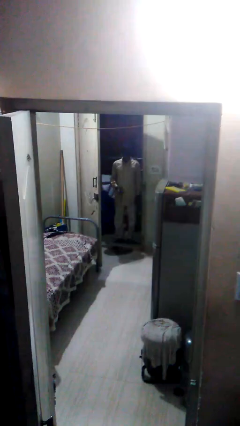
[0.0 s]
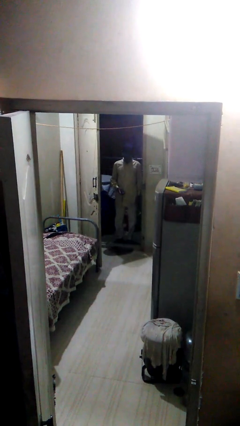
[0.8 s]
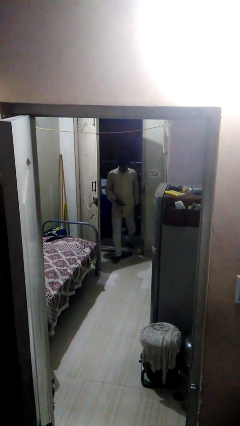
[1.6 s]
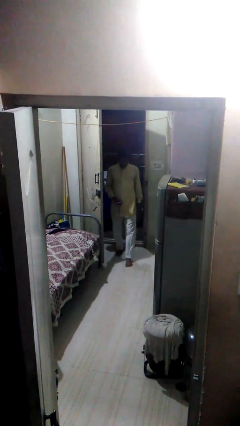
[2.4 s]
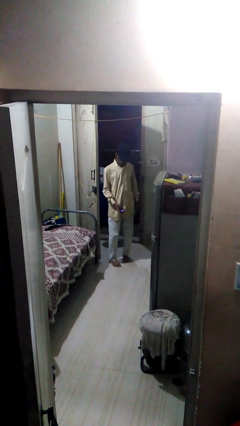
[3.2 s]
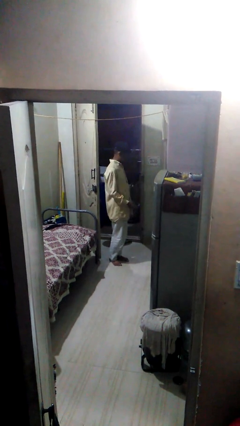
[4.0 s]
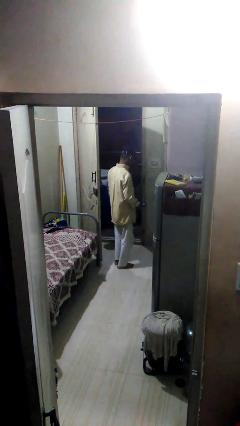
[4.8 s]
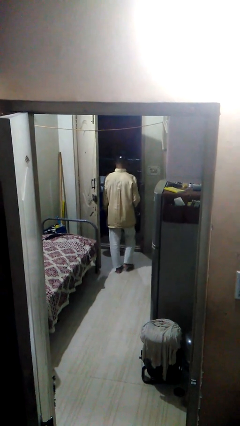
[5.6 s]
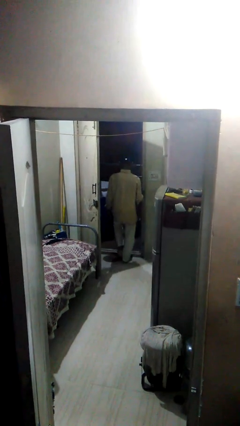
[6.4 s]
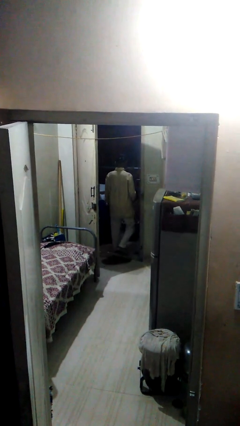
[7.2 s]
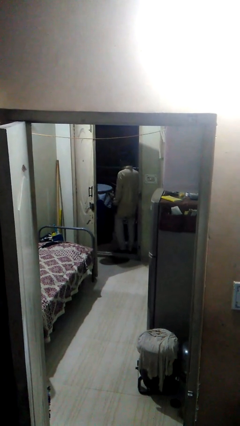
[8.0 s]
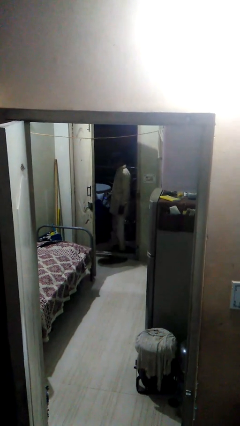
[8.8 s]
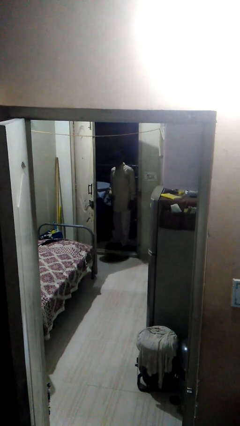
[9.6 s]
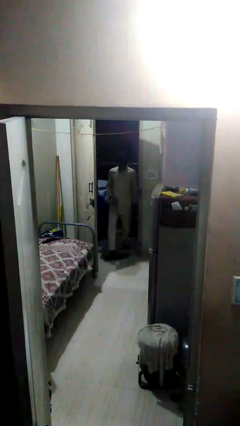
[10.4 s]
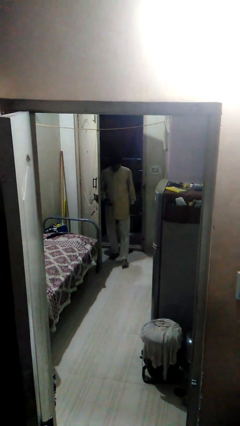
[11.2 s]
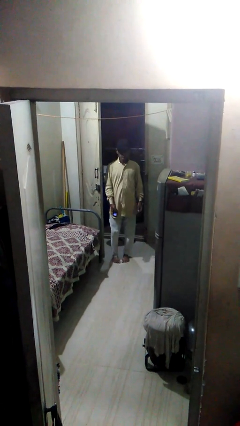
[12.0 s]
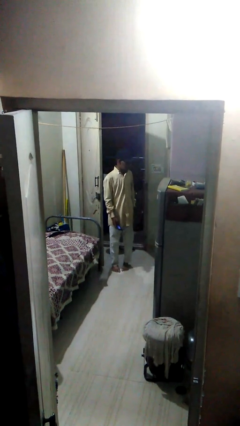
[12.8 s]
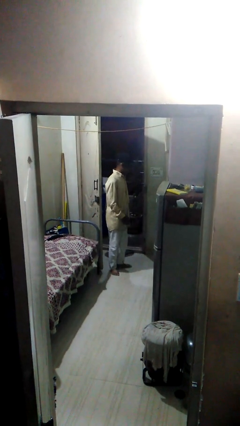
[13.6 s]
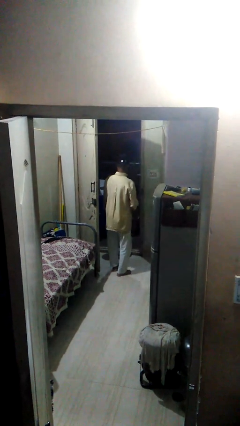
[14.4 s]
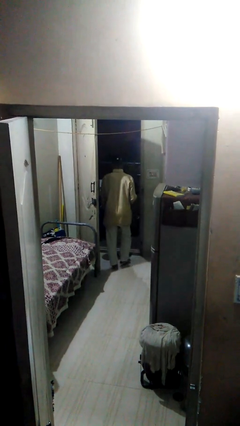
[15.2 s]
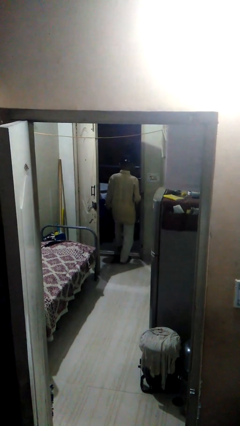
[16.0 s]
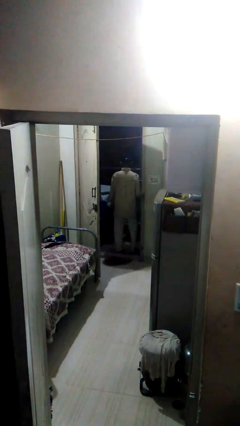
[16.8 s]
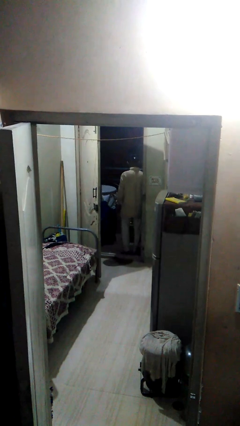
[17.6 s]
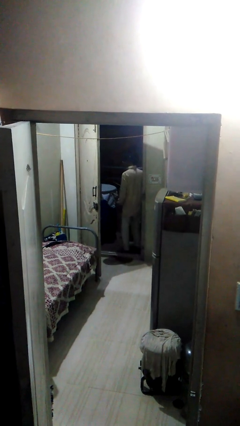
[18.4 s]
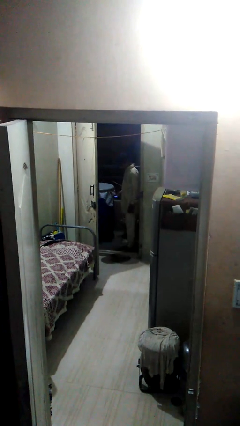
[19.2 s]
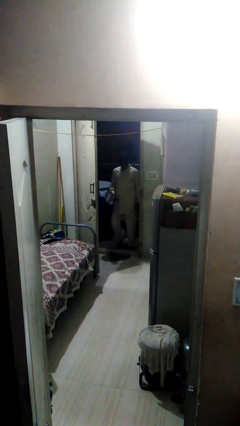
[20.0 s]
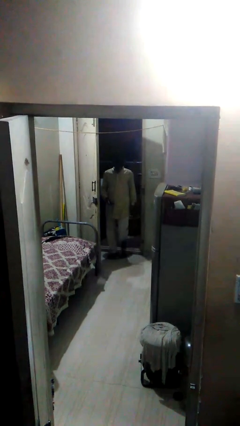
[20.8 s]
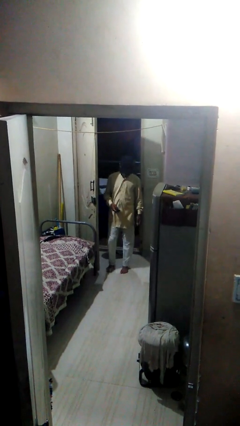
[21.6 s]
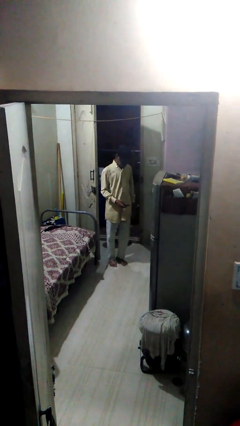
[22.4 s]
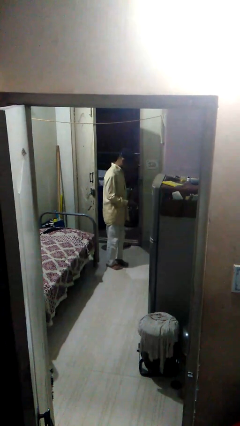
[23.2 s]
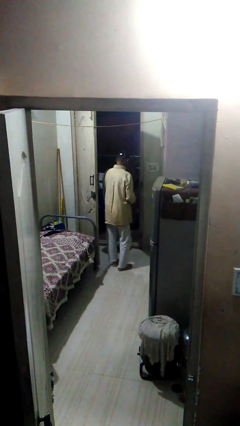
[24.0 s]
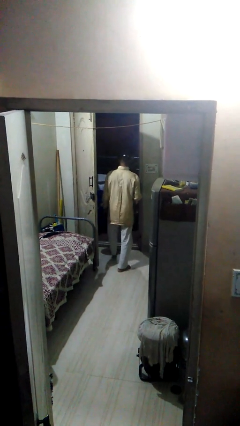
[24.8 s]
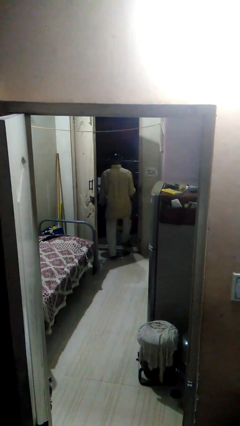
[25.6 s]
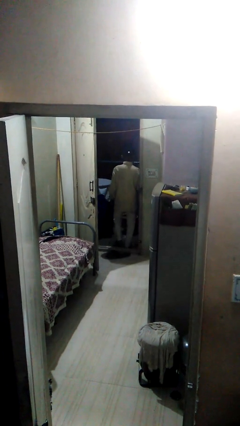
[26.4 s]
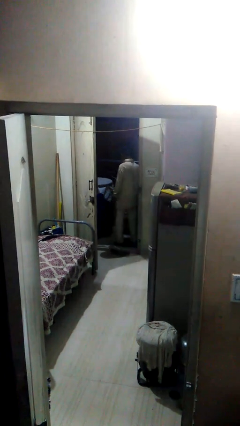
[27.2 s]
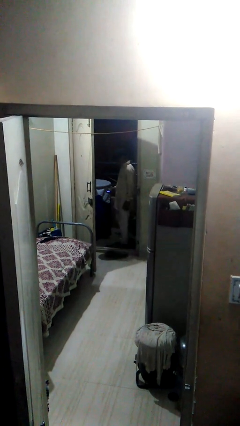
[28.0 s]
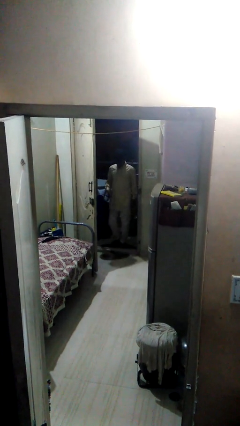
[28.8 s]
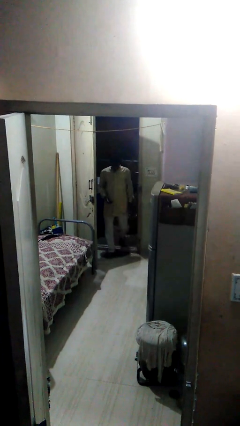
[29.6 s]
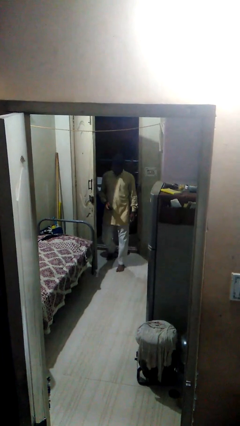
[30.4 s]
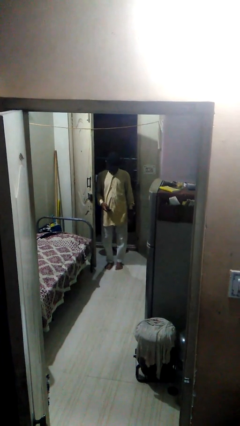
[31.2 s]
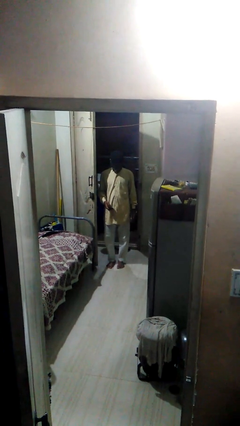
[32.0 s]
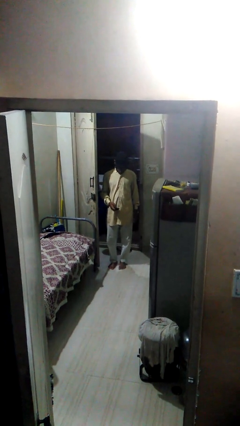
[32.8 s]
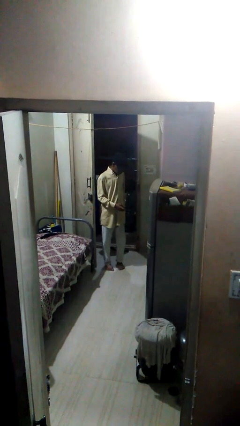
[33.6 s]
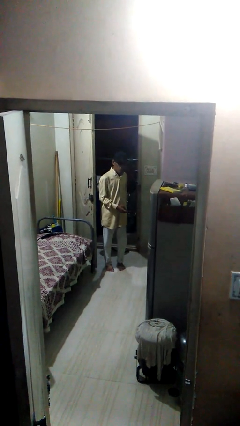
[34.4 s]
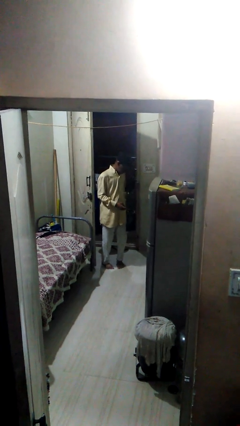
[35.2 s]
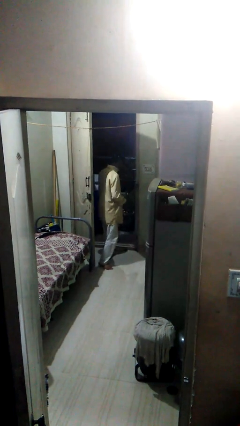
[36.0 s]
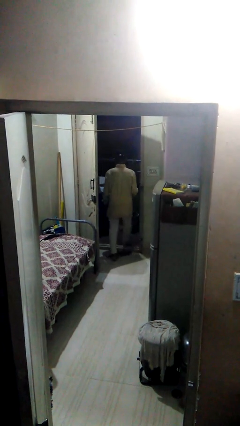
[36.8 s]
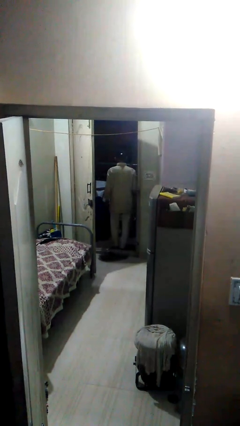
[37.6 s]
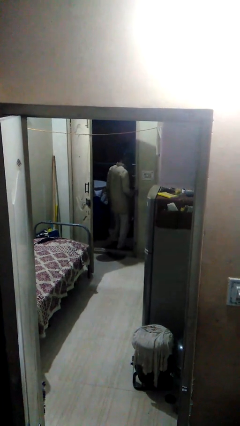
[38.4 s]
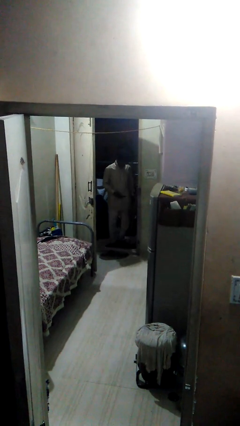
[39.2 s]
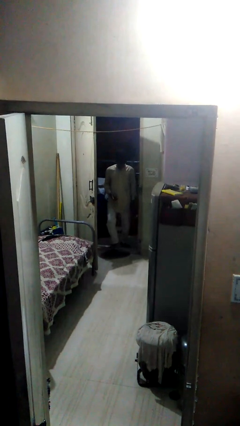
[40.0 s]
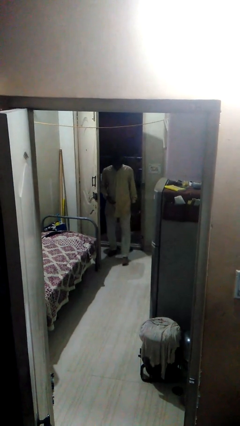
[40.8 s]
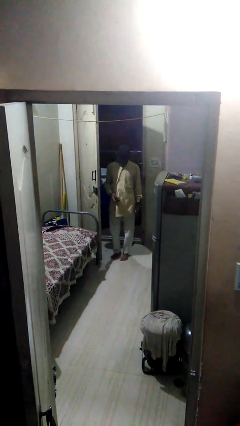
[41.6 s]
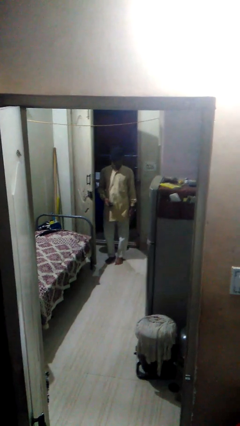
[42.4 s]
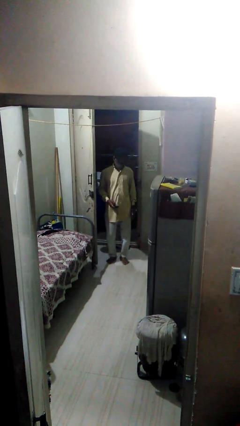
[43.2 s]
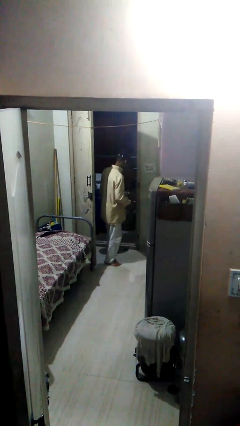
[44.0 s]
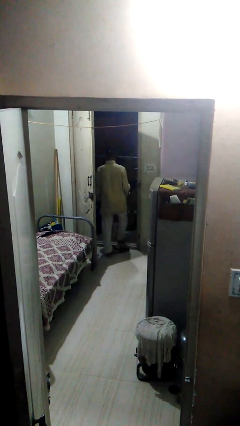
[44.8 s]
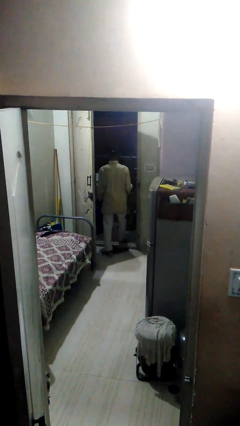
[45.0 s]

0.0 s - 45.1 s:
person texts on phone

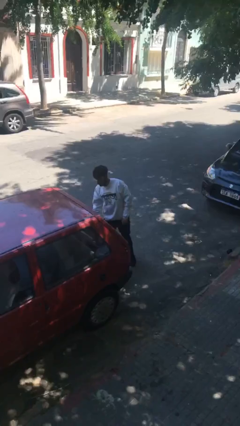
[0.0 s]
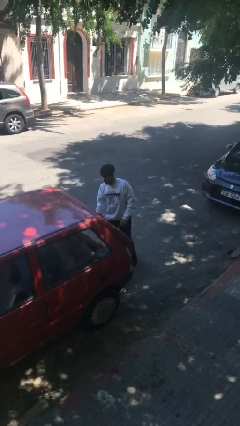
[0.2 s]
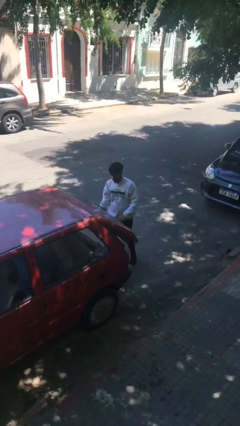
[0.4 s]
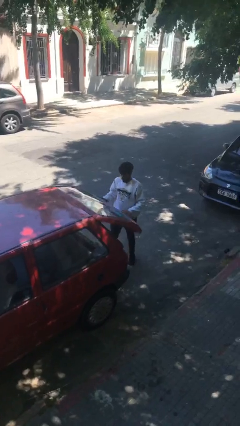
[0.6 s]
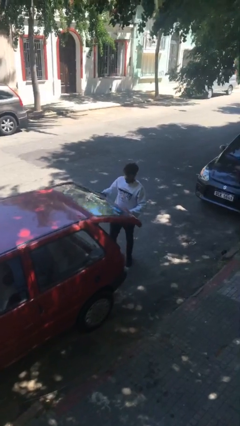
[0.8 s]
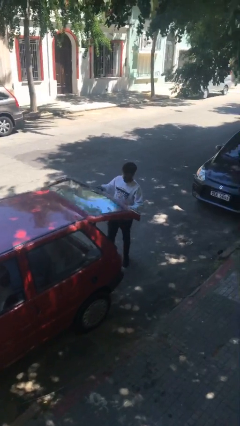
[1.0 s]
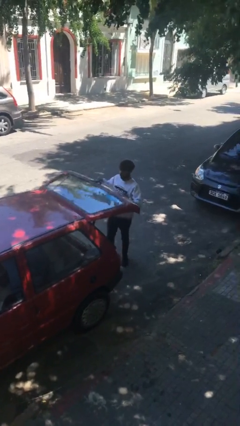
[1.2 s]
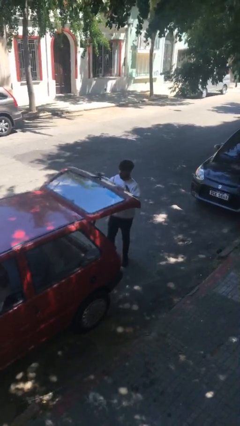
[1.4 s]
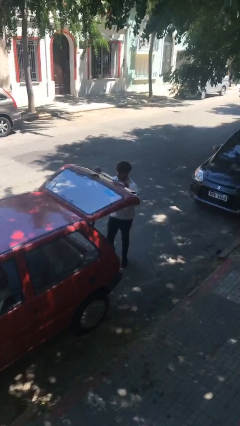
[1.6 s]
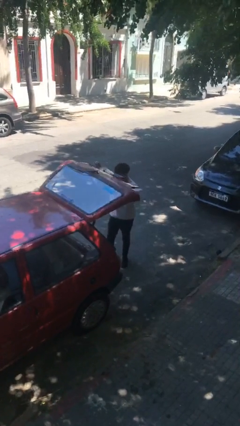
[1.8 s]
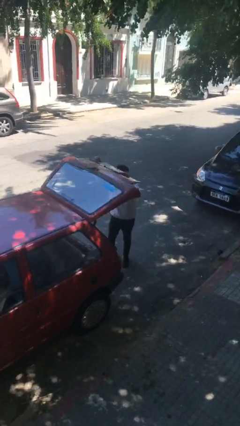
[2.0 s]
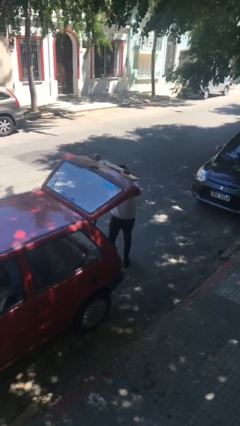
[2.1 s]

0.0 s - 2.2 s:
person opens car trunk

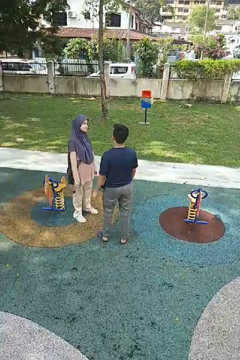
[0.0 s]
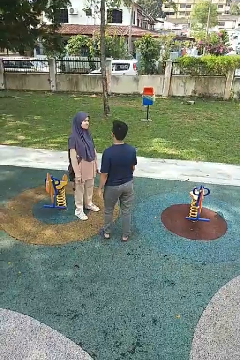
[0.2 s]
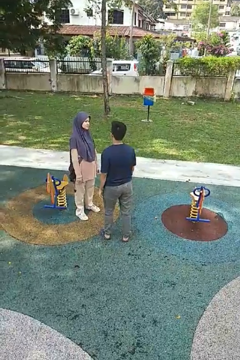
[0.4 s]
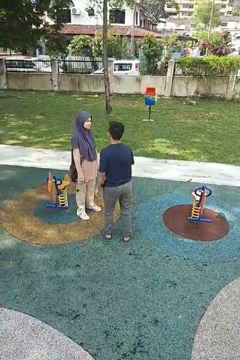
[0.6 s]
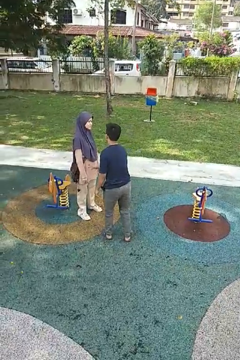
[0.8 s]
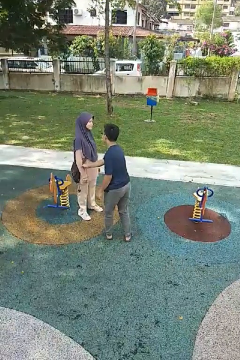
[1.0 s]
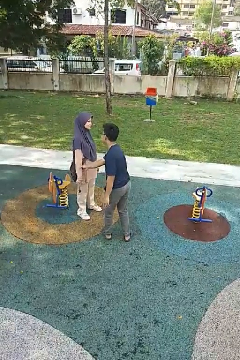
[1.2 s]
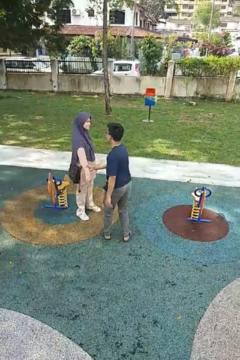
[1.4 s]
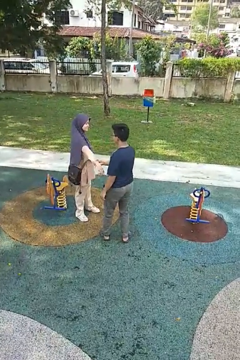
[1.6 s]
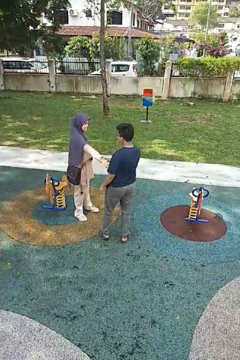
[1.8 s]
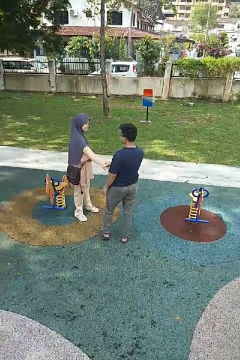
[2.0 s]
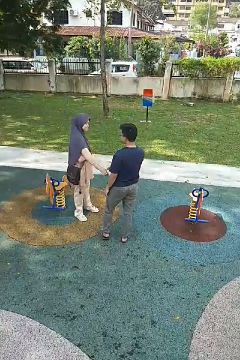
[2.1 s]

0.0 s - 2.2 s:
person grabs person by forearm

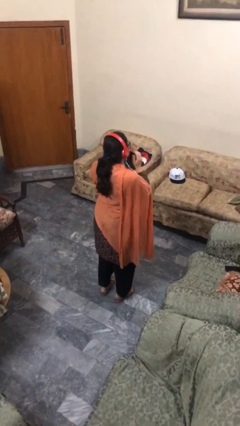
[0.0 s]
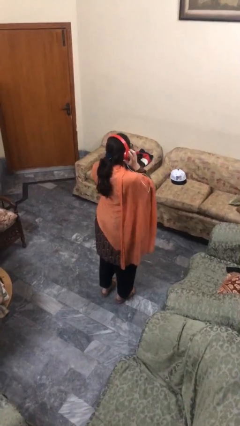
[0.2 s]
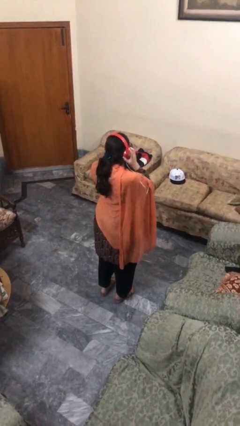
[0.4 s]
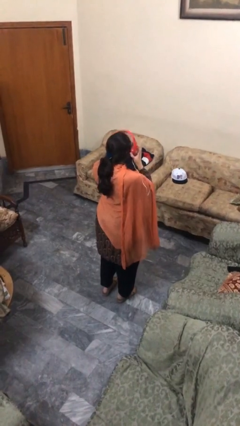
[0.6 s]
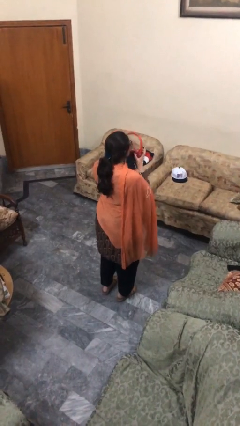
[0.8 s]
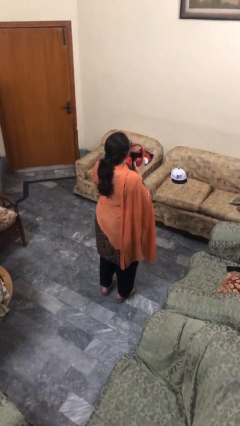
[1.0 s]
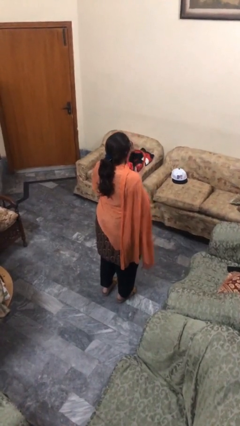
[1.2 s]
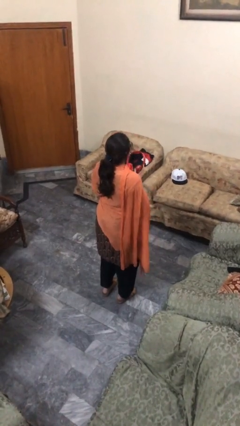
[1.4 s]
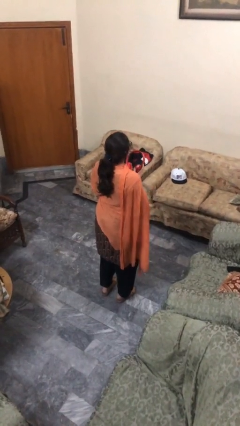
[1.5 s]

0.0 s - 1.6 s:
person takes off headphones

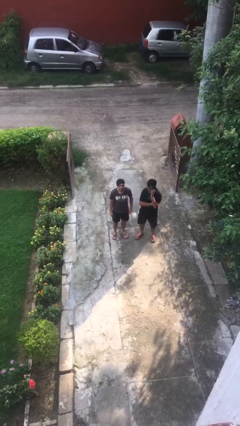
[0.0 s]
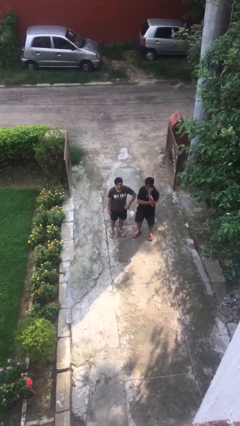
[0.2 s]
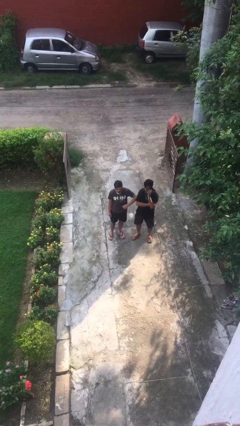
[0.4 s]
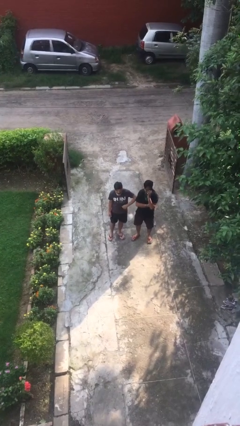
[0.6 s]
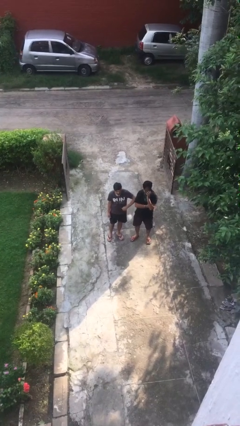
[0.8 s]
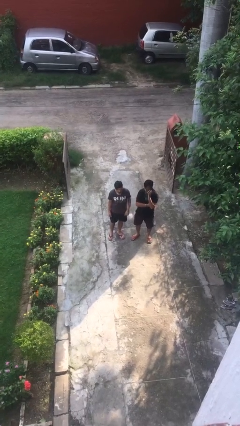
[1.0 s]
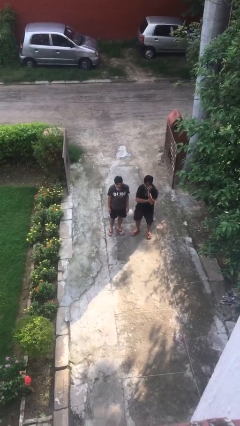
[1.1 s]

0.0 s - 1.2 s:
person nudges person with elbow
